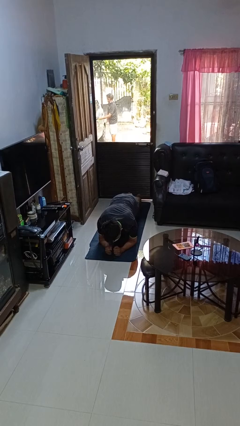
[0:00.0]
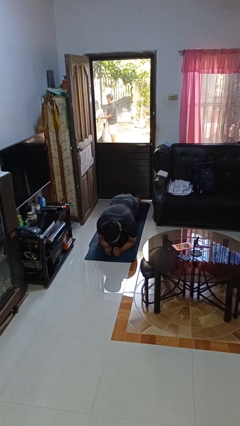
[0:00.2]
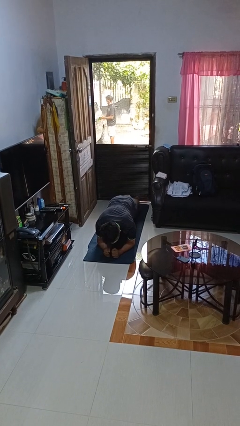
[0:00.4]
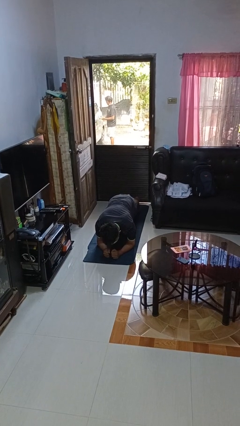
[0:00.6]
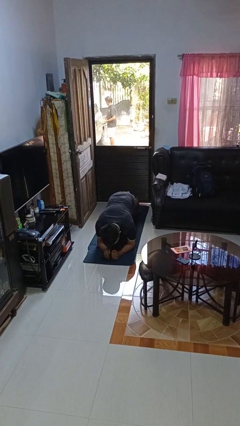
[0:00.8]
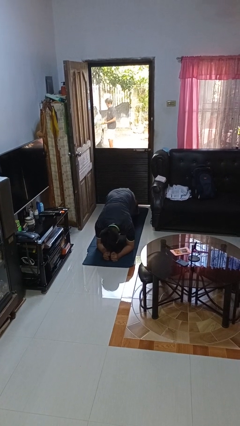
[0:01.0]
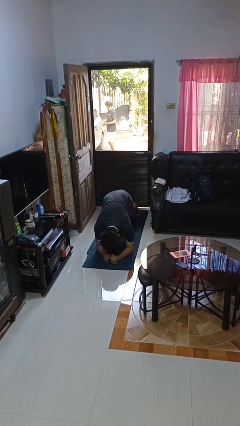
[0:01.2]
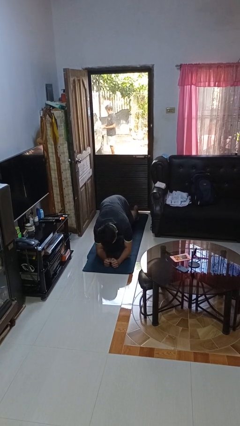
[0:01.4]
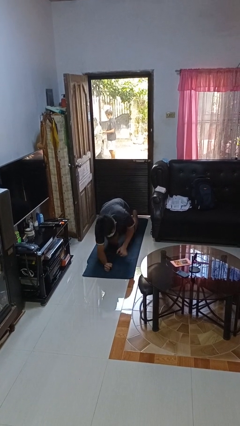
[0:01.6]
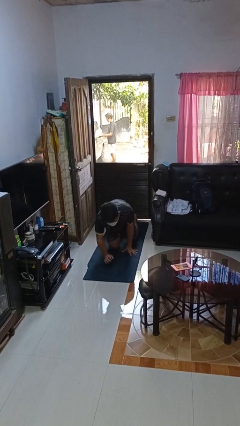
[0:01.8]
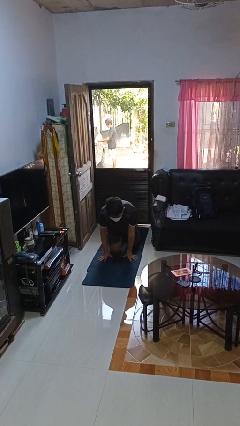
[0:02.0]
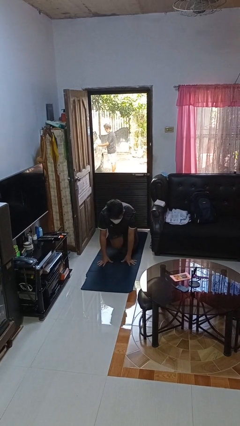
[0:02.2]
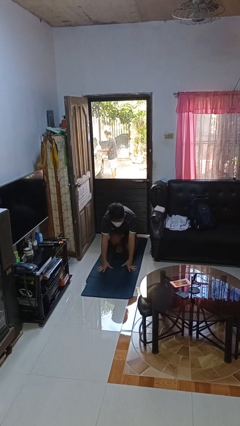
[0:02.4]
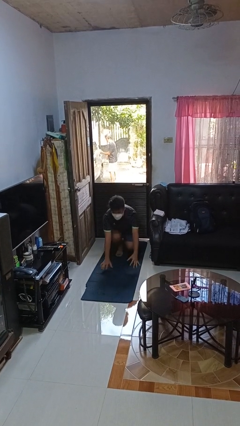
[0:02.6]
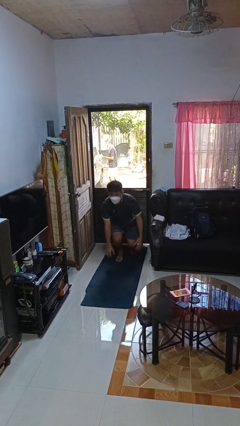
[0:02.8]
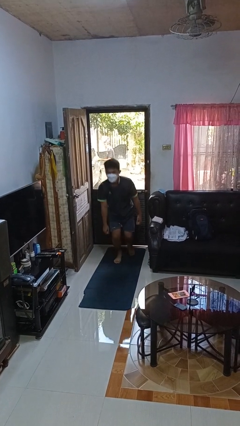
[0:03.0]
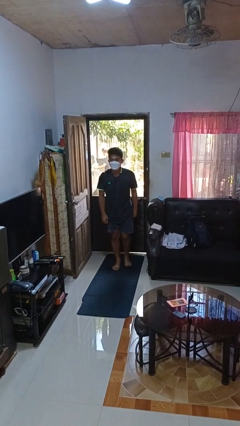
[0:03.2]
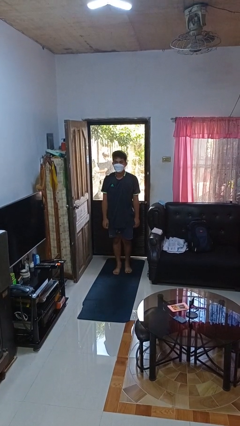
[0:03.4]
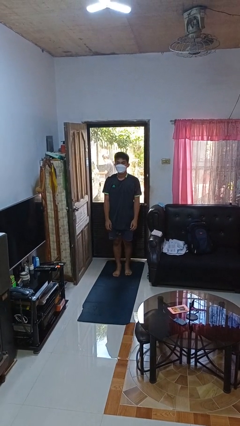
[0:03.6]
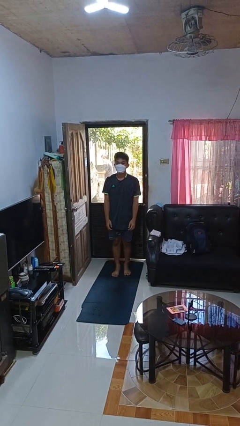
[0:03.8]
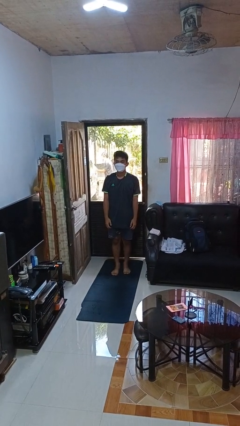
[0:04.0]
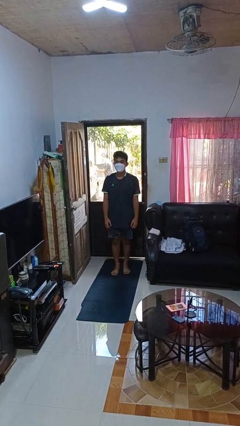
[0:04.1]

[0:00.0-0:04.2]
person stands up from floor

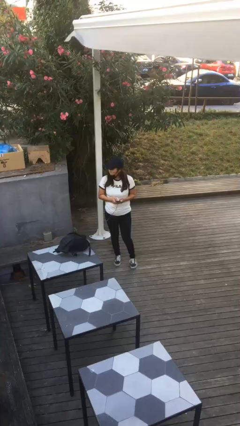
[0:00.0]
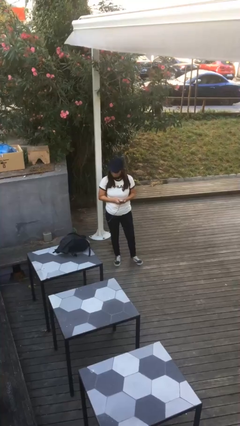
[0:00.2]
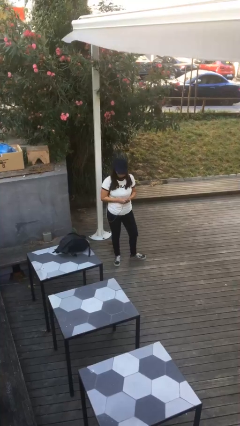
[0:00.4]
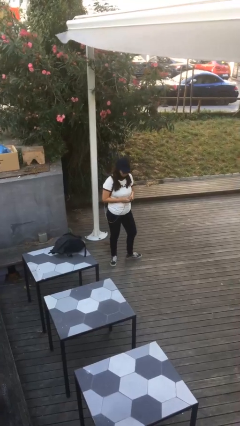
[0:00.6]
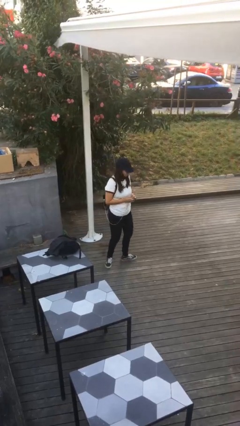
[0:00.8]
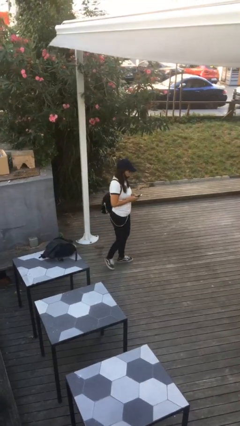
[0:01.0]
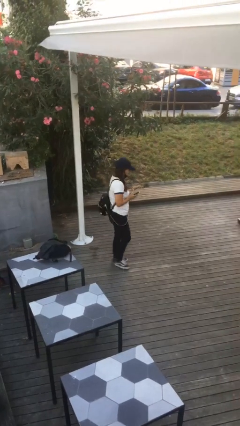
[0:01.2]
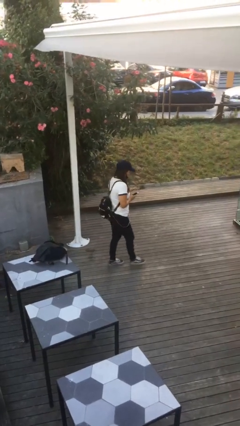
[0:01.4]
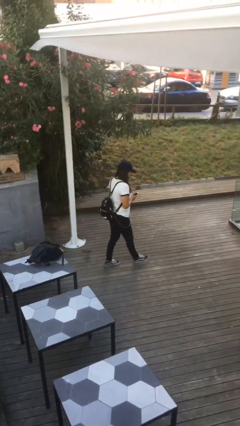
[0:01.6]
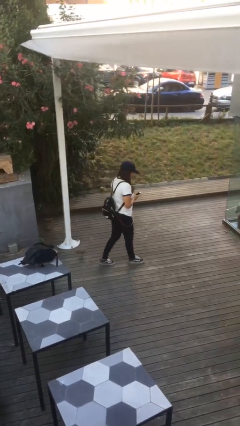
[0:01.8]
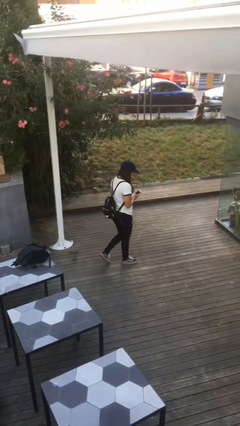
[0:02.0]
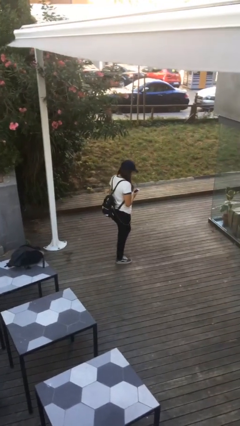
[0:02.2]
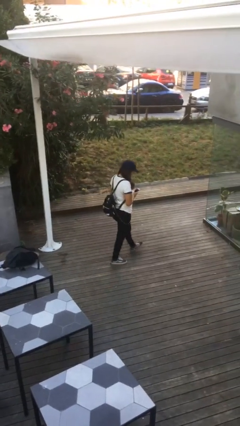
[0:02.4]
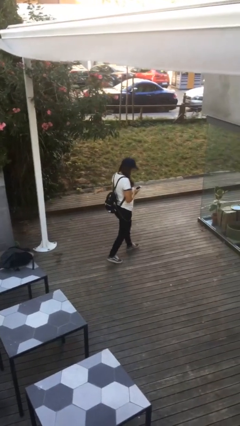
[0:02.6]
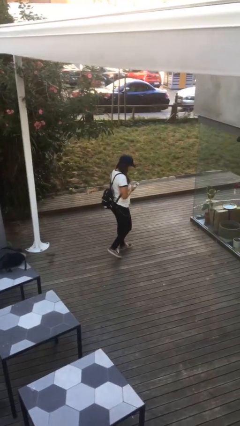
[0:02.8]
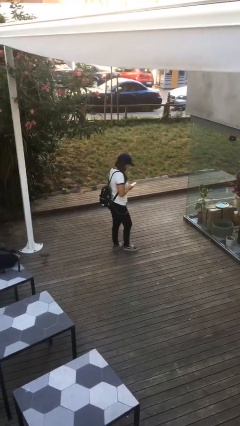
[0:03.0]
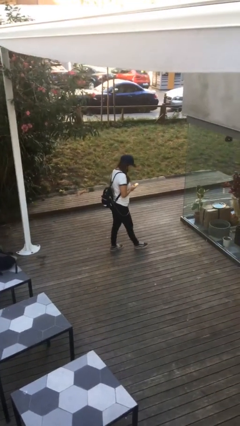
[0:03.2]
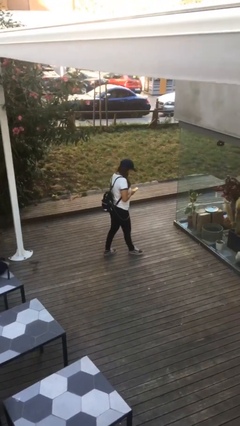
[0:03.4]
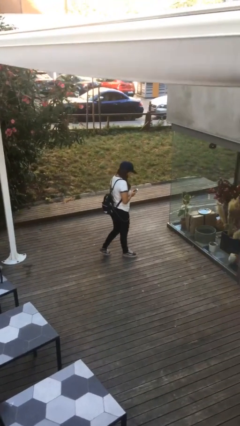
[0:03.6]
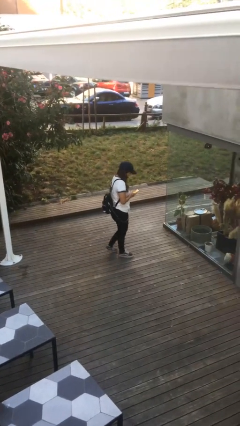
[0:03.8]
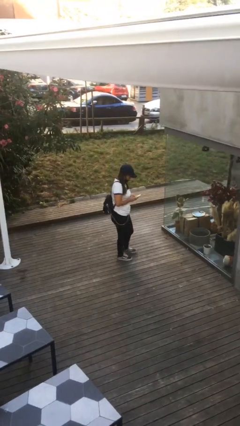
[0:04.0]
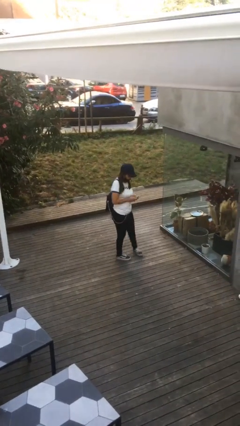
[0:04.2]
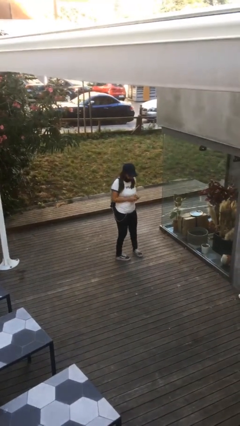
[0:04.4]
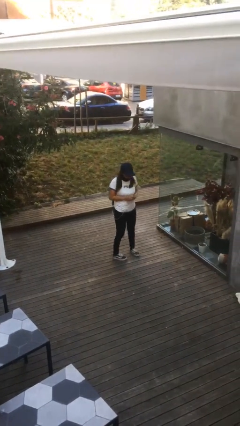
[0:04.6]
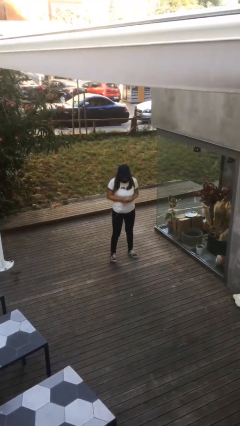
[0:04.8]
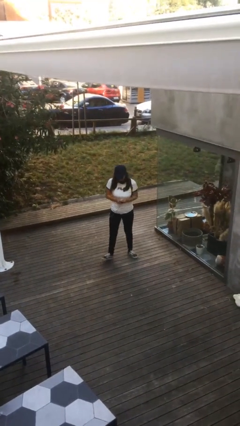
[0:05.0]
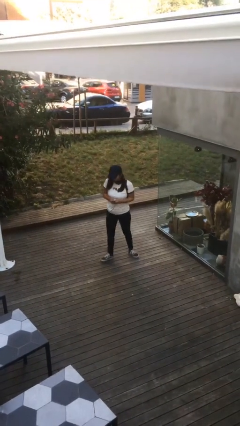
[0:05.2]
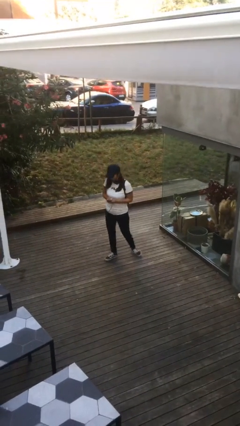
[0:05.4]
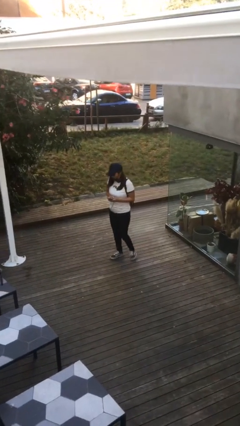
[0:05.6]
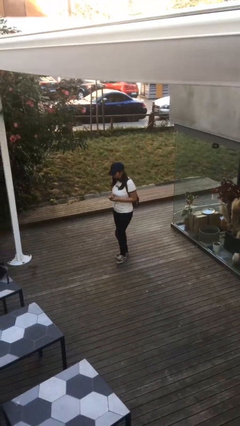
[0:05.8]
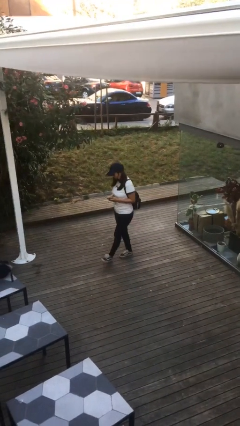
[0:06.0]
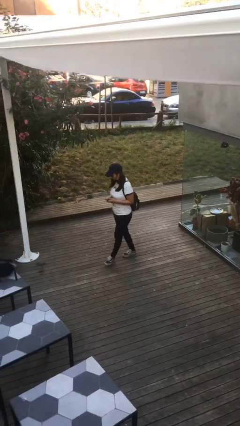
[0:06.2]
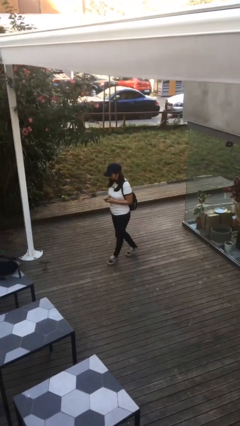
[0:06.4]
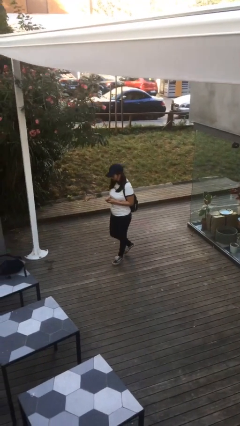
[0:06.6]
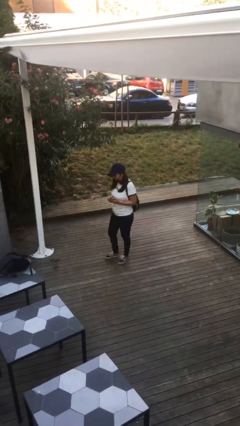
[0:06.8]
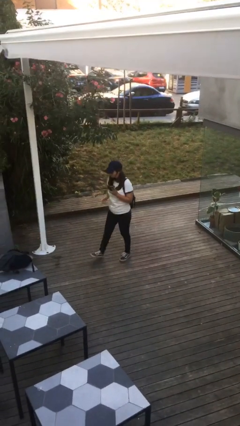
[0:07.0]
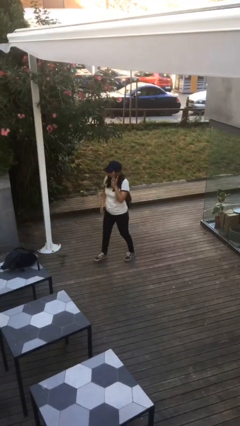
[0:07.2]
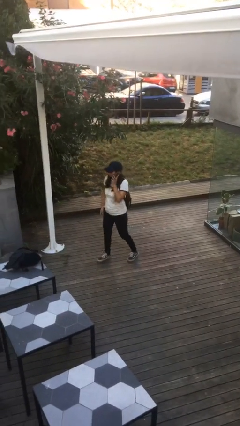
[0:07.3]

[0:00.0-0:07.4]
person texts on phone

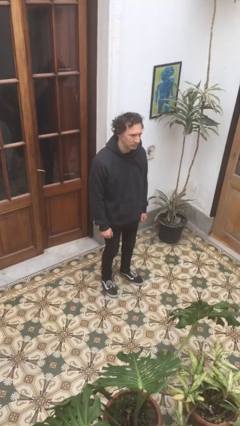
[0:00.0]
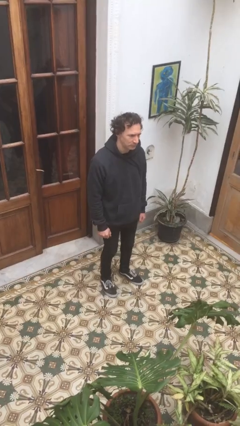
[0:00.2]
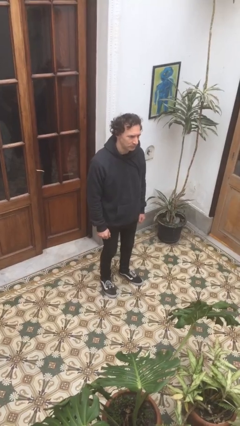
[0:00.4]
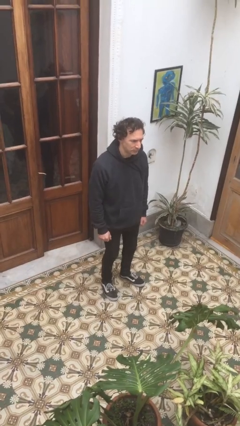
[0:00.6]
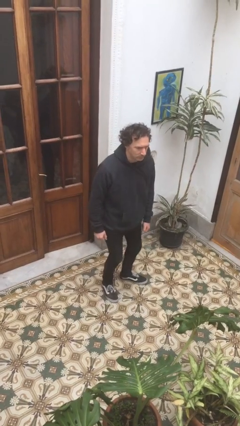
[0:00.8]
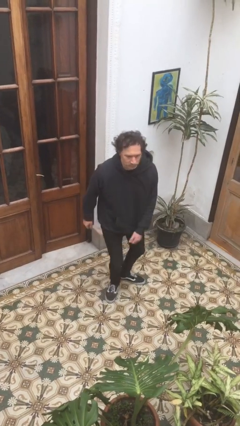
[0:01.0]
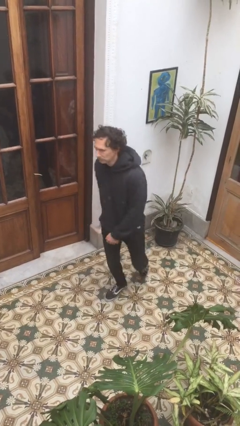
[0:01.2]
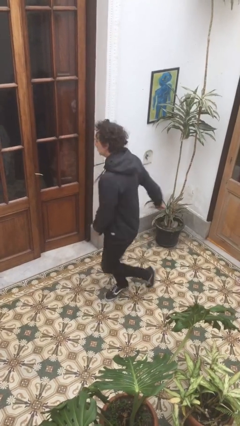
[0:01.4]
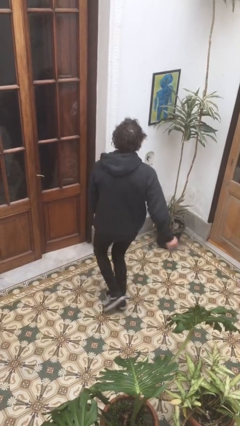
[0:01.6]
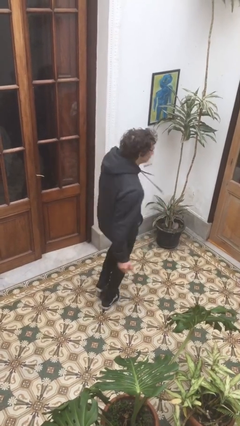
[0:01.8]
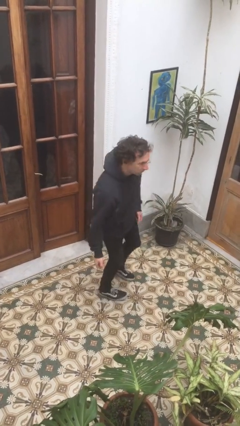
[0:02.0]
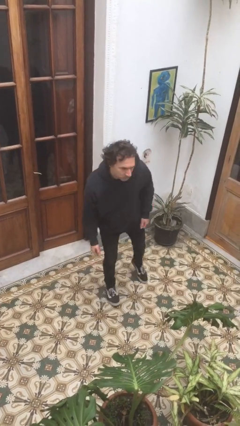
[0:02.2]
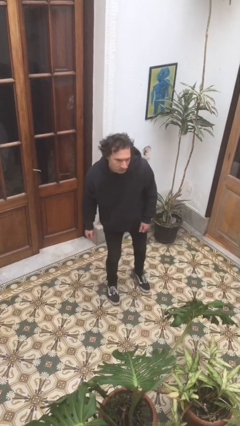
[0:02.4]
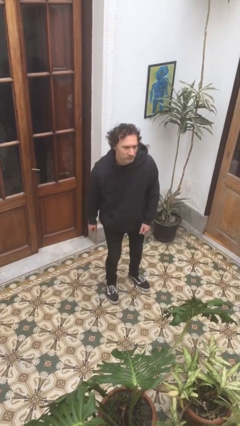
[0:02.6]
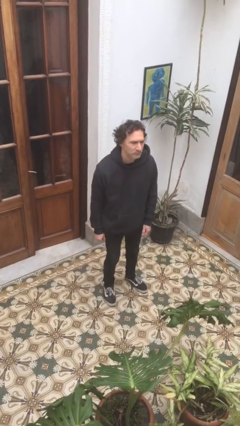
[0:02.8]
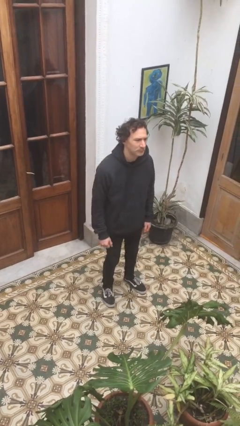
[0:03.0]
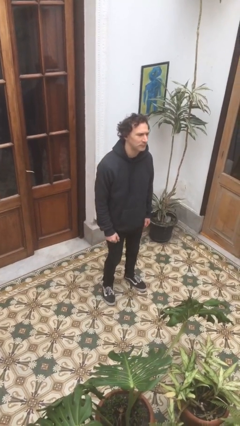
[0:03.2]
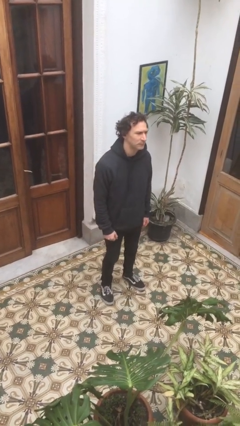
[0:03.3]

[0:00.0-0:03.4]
person twirls

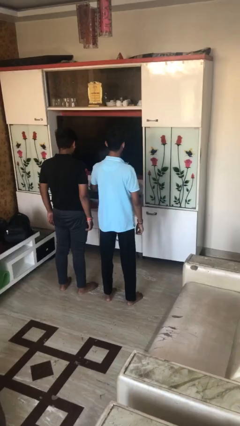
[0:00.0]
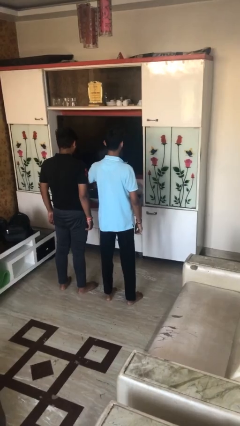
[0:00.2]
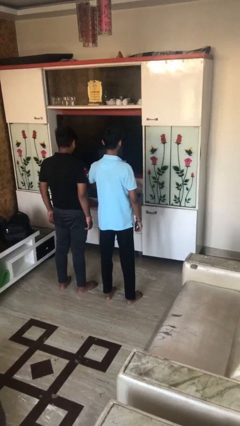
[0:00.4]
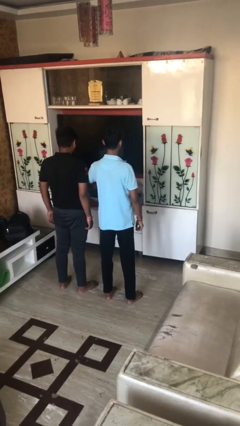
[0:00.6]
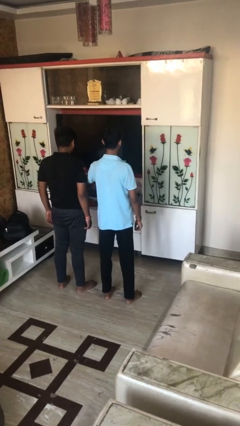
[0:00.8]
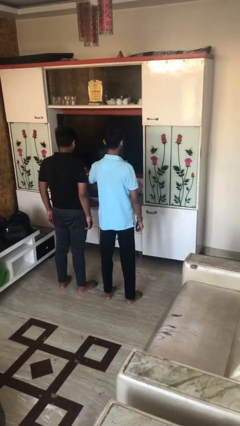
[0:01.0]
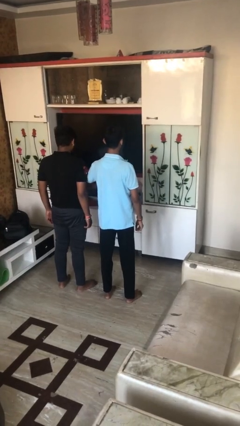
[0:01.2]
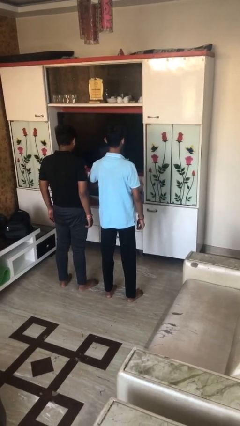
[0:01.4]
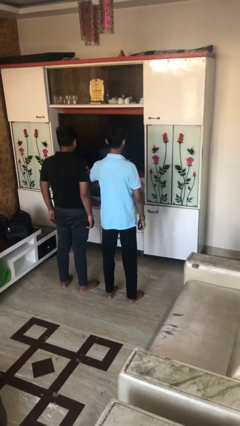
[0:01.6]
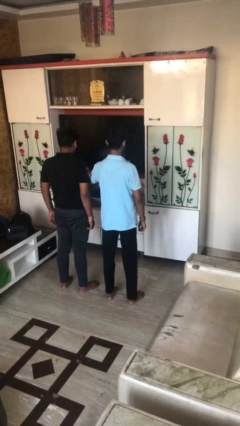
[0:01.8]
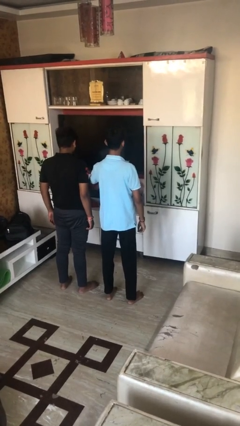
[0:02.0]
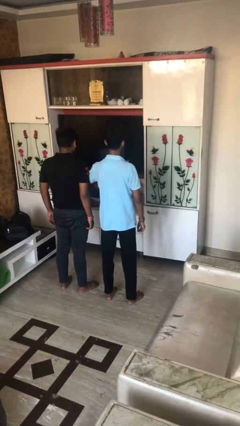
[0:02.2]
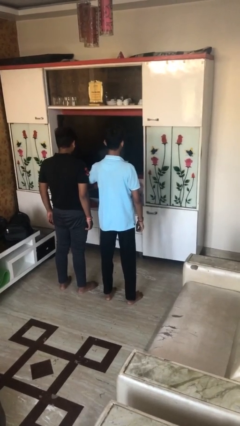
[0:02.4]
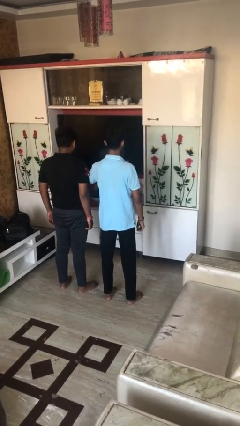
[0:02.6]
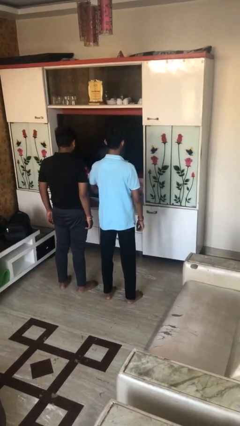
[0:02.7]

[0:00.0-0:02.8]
person nudges person with elbow
